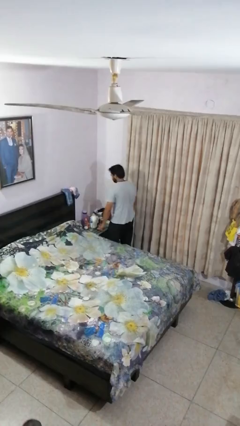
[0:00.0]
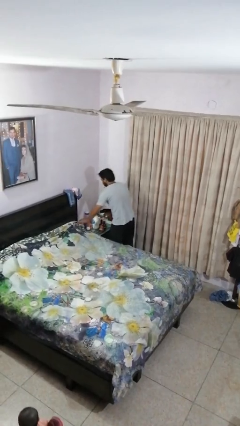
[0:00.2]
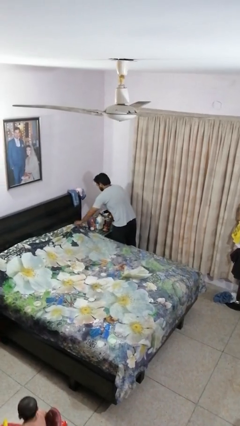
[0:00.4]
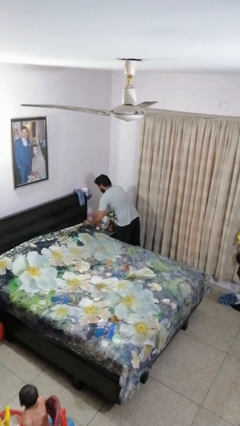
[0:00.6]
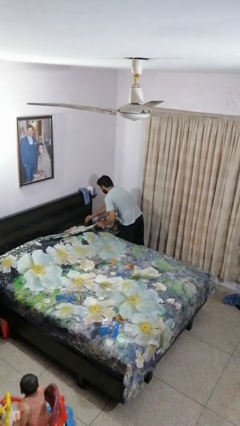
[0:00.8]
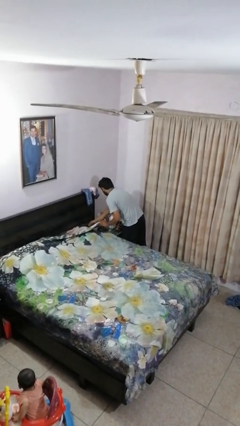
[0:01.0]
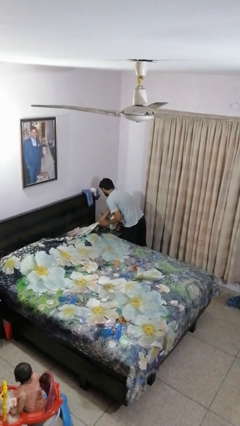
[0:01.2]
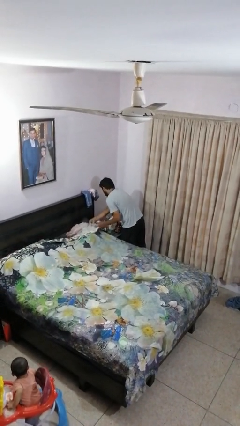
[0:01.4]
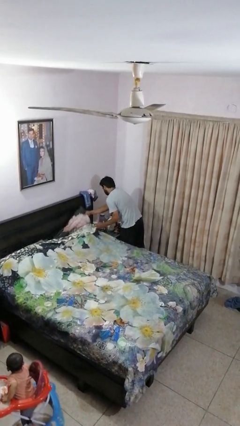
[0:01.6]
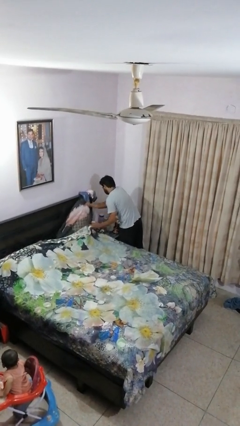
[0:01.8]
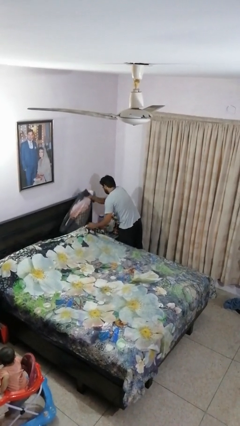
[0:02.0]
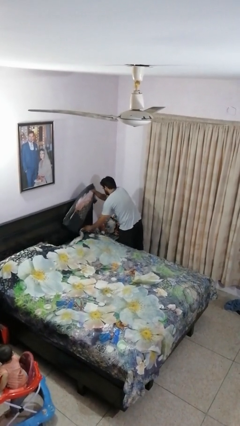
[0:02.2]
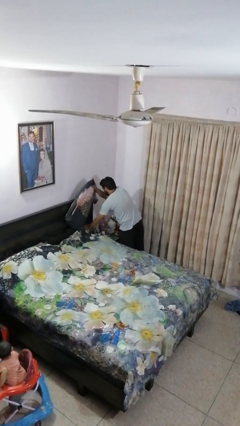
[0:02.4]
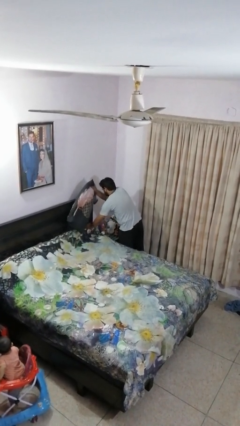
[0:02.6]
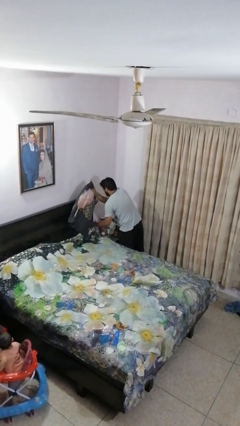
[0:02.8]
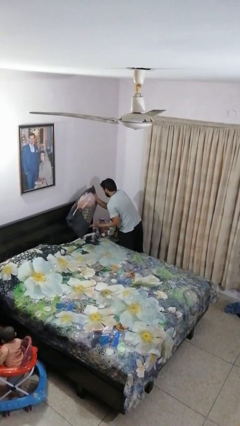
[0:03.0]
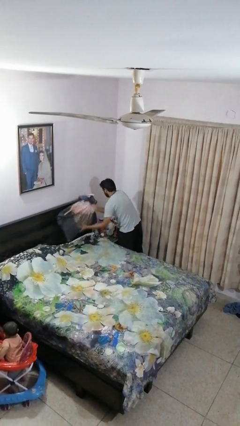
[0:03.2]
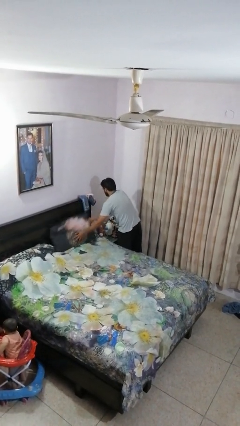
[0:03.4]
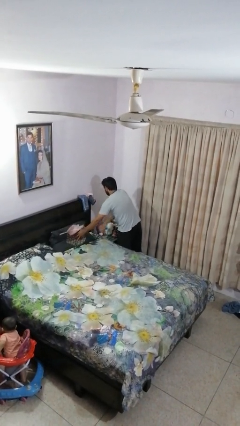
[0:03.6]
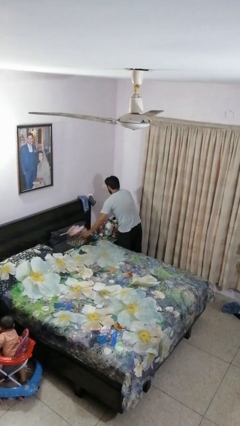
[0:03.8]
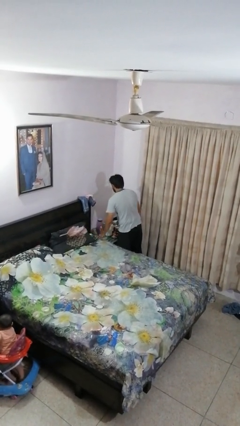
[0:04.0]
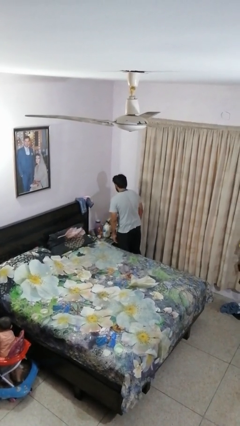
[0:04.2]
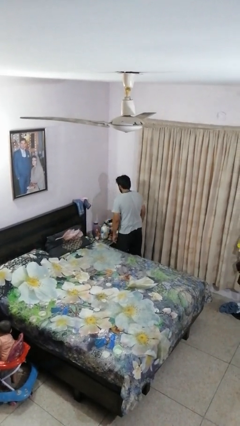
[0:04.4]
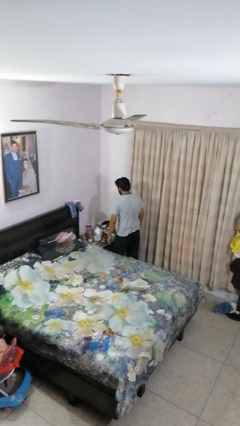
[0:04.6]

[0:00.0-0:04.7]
person makes bed

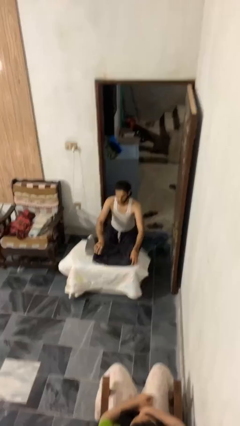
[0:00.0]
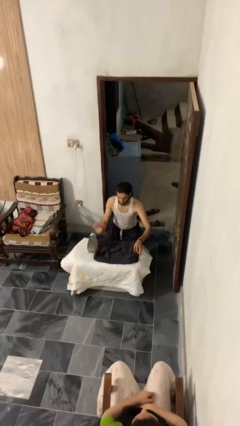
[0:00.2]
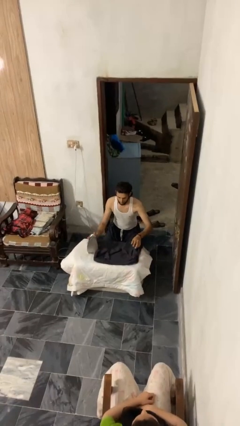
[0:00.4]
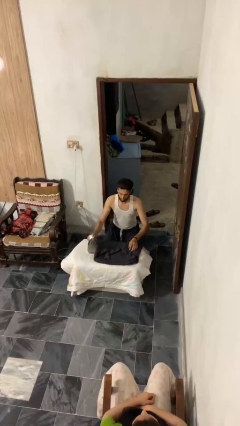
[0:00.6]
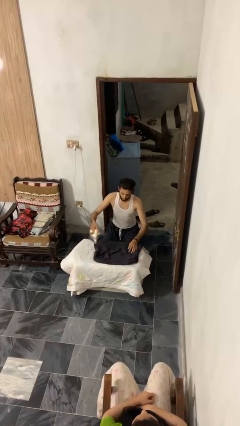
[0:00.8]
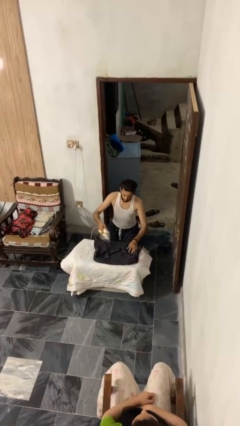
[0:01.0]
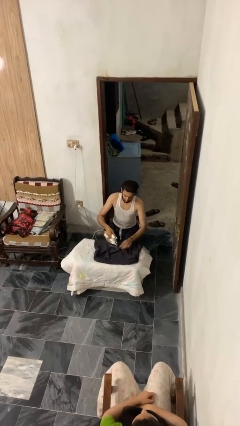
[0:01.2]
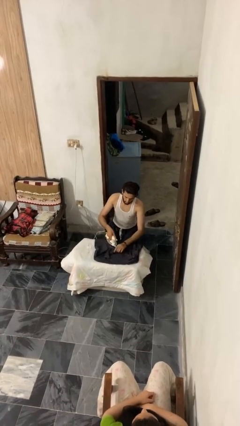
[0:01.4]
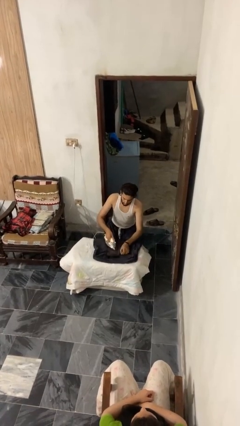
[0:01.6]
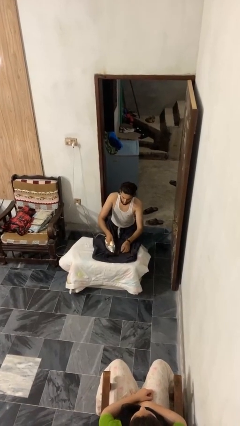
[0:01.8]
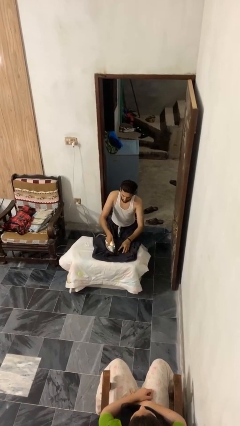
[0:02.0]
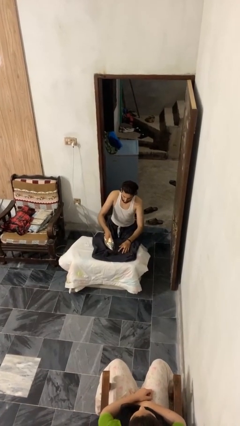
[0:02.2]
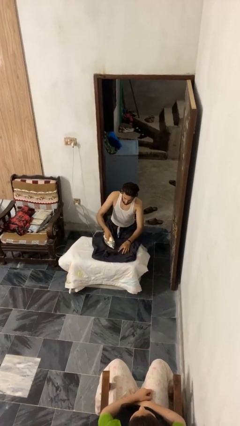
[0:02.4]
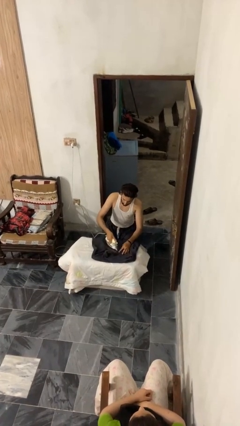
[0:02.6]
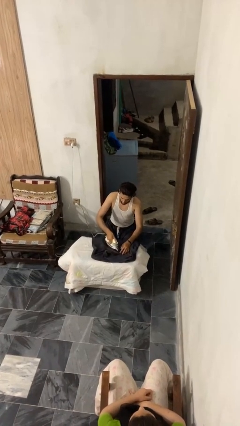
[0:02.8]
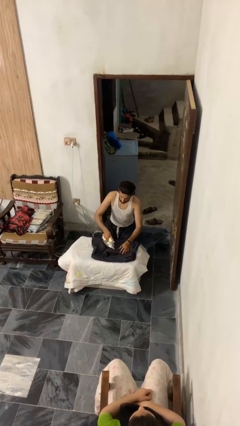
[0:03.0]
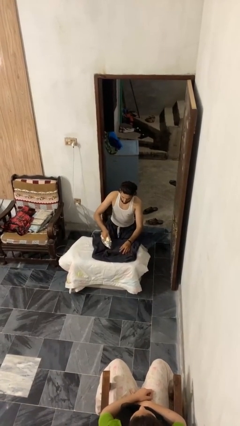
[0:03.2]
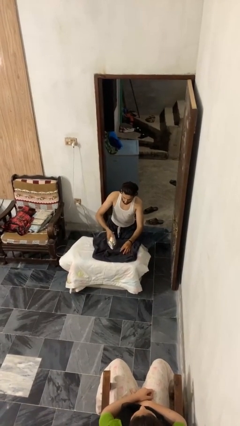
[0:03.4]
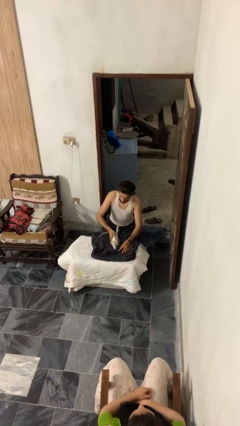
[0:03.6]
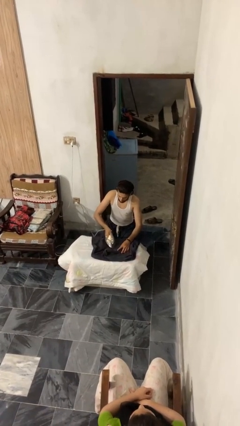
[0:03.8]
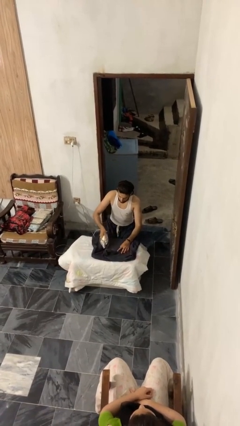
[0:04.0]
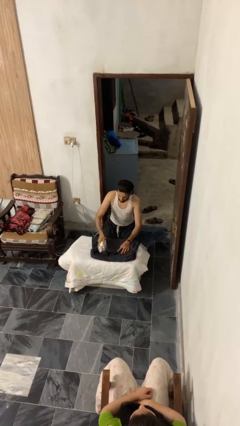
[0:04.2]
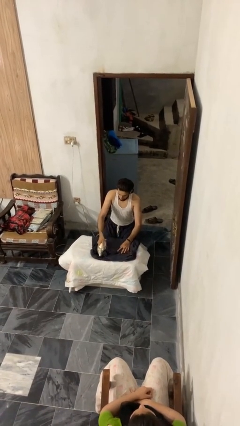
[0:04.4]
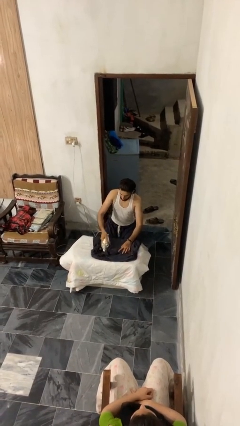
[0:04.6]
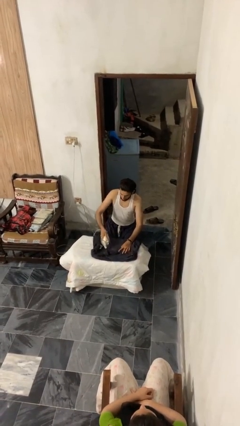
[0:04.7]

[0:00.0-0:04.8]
person irons clothes

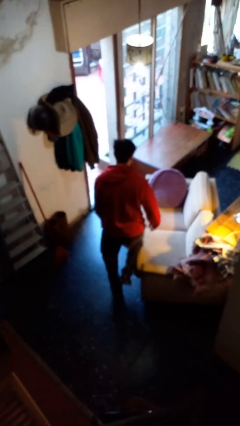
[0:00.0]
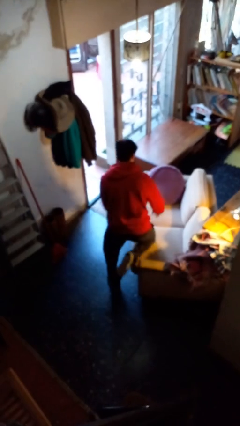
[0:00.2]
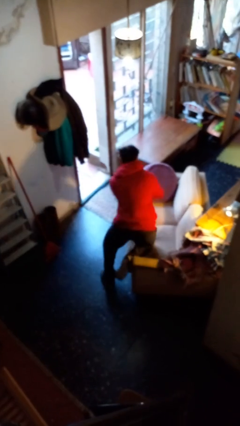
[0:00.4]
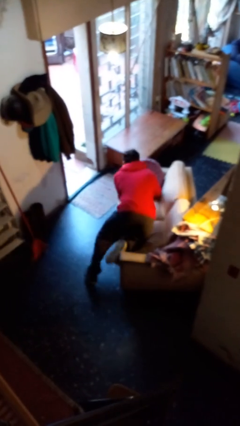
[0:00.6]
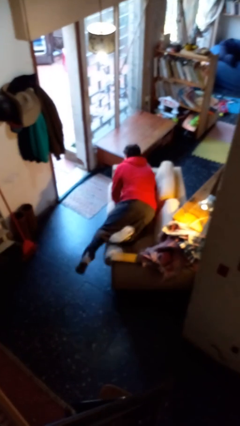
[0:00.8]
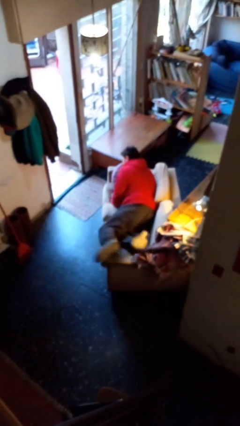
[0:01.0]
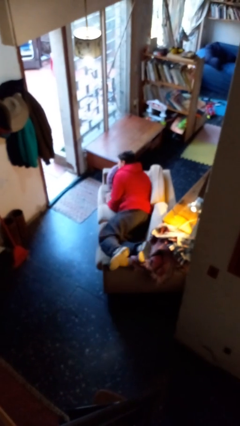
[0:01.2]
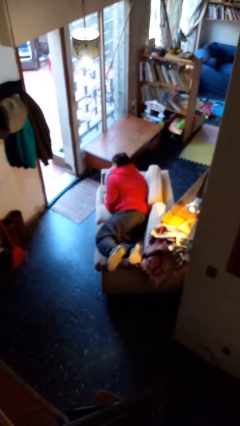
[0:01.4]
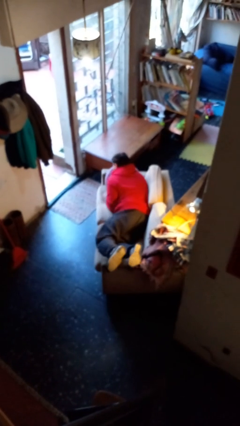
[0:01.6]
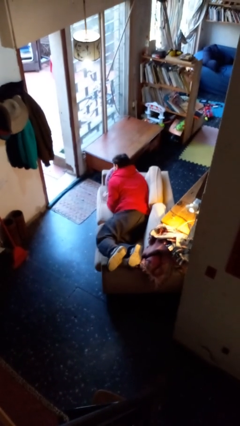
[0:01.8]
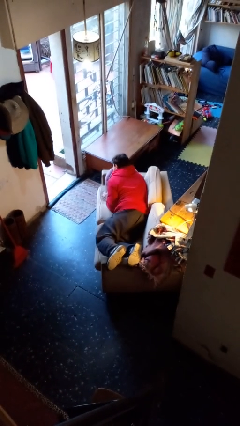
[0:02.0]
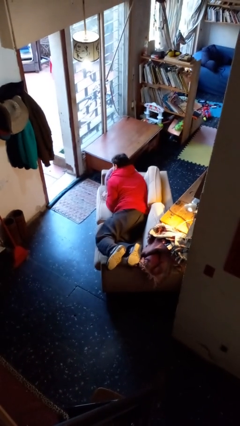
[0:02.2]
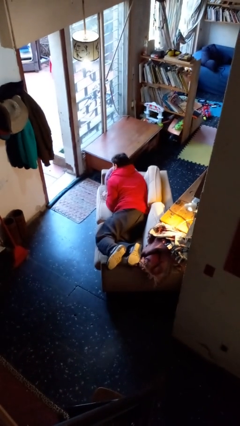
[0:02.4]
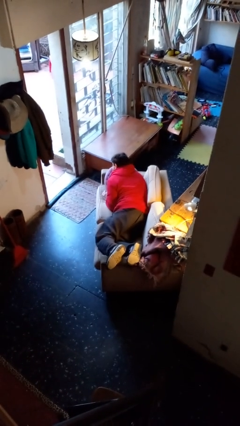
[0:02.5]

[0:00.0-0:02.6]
person lies down on couch

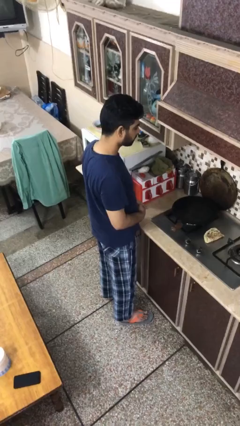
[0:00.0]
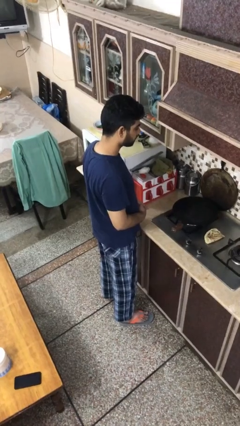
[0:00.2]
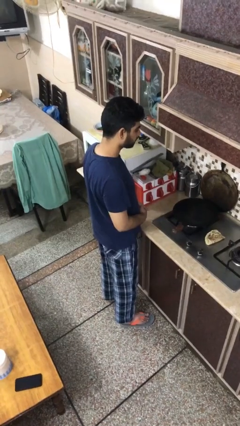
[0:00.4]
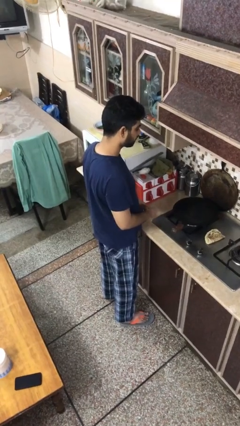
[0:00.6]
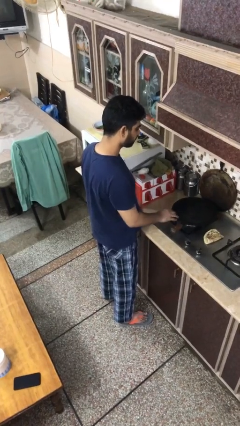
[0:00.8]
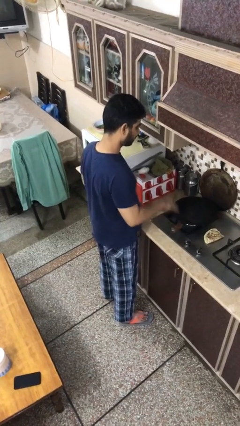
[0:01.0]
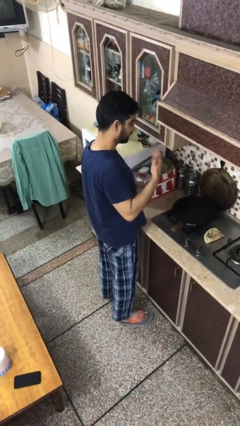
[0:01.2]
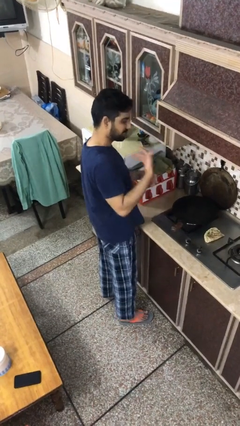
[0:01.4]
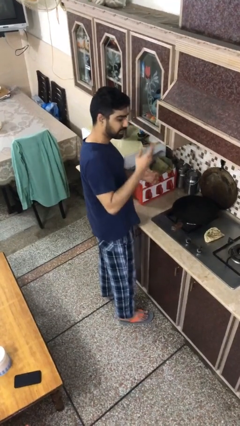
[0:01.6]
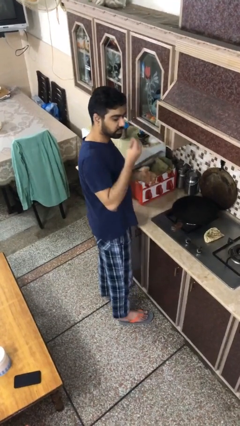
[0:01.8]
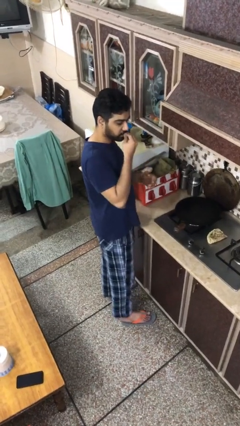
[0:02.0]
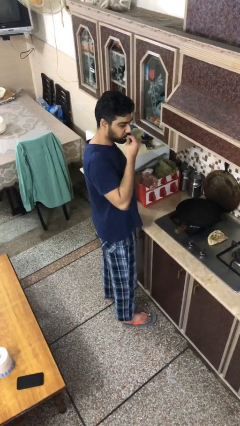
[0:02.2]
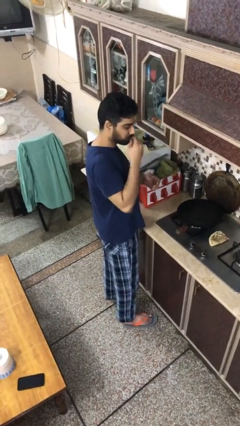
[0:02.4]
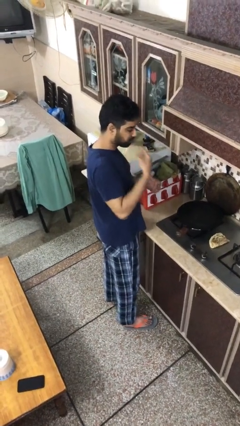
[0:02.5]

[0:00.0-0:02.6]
person burns hand

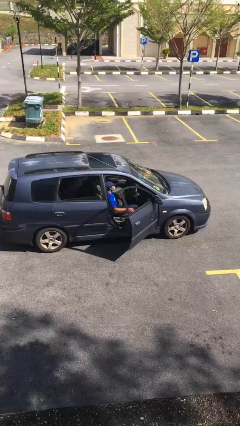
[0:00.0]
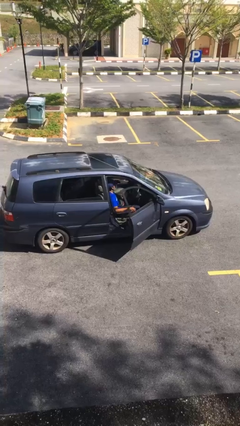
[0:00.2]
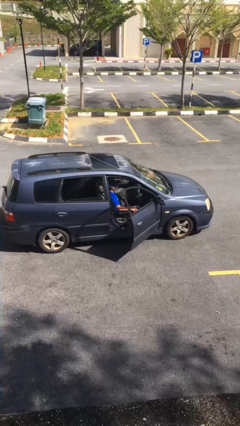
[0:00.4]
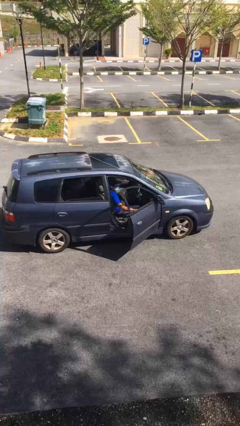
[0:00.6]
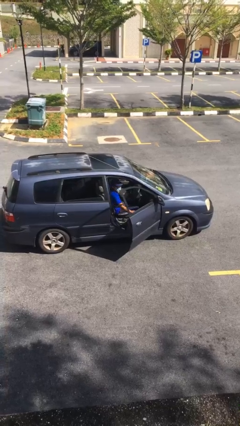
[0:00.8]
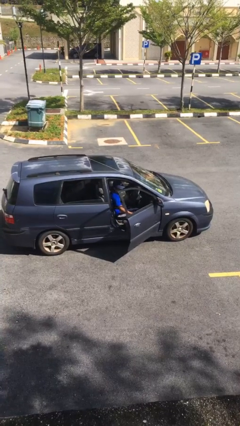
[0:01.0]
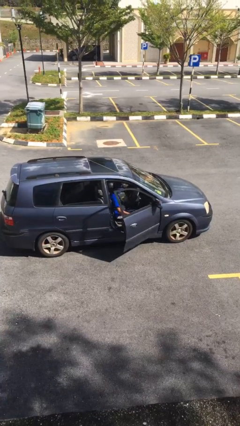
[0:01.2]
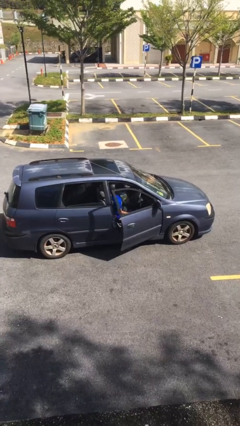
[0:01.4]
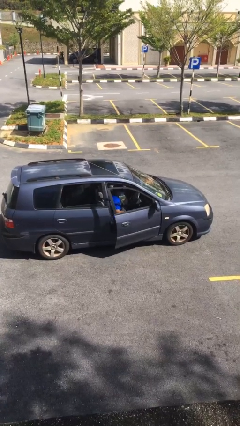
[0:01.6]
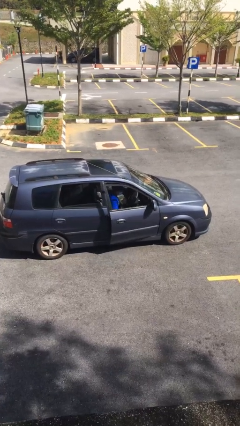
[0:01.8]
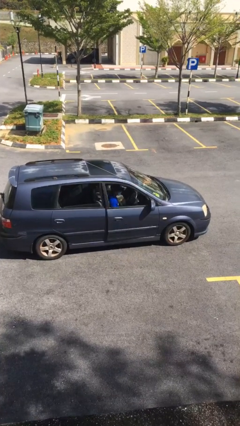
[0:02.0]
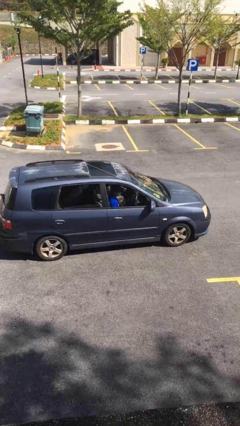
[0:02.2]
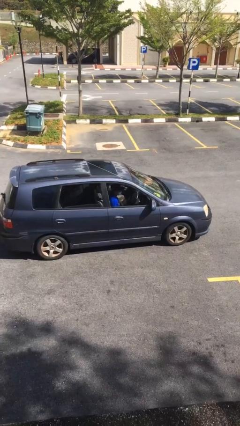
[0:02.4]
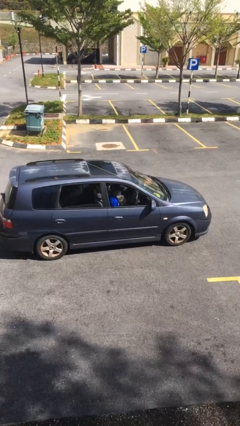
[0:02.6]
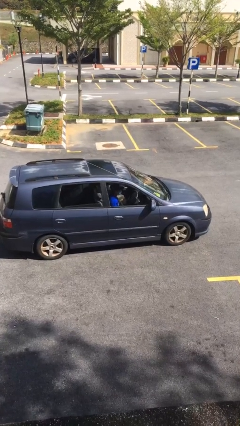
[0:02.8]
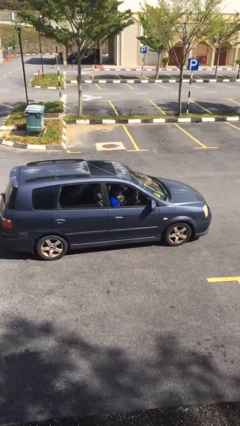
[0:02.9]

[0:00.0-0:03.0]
person closes car door

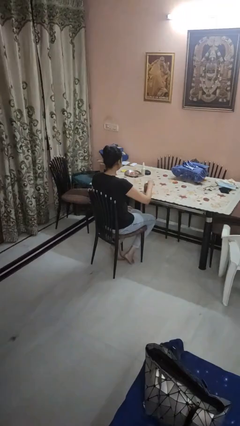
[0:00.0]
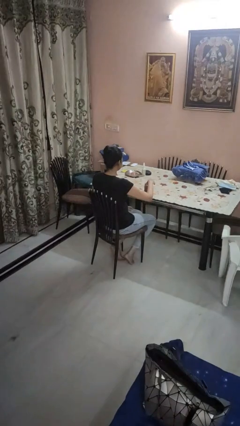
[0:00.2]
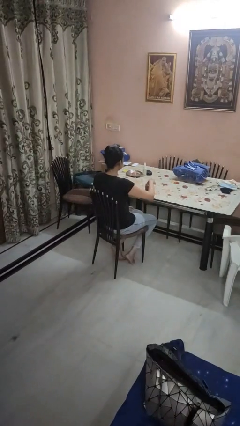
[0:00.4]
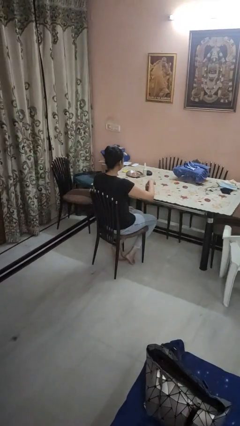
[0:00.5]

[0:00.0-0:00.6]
person closes jar
